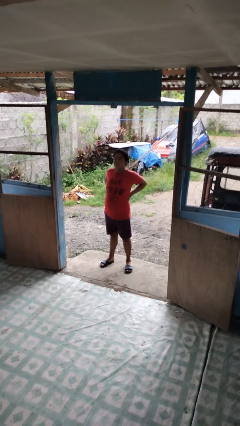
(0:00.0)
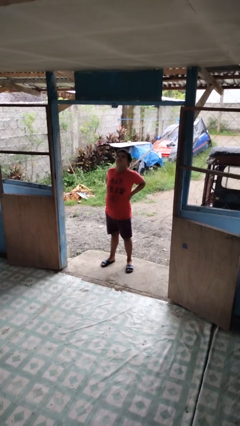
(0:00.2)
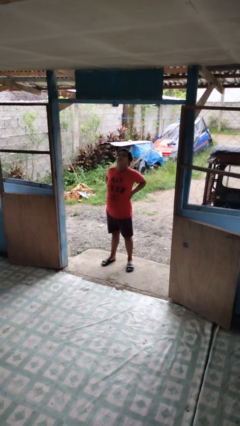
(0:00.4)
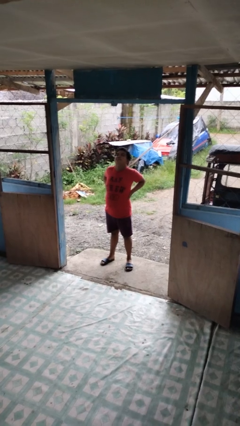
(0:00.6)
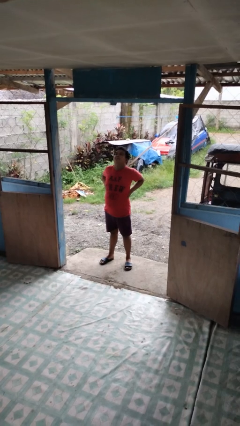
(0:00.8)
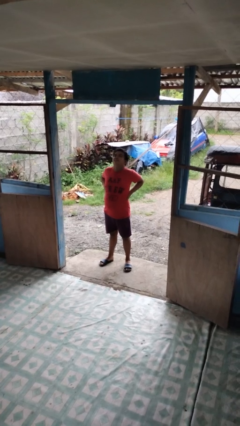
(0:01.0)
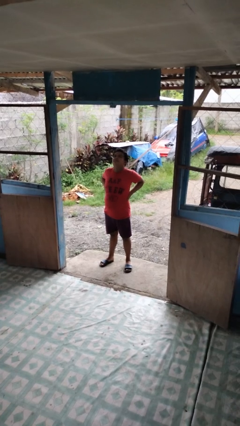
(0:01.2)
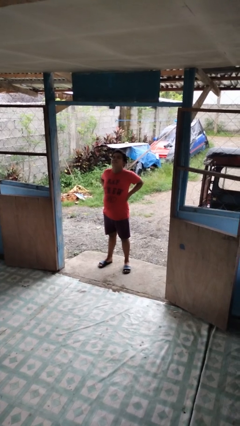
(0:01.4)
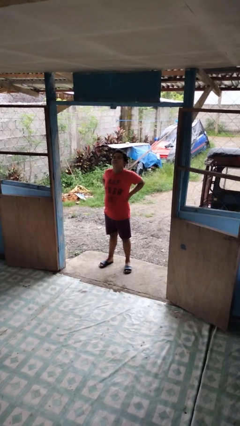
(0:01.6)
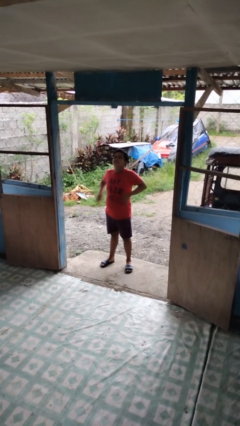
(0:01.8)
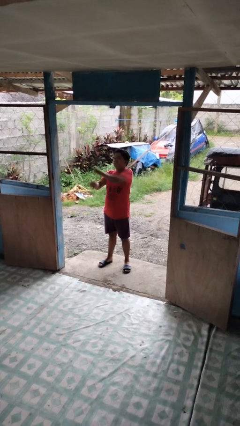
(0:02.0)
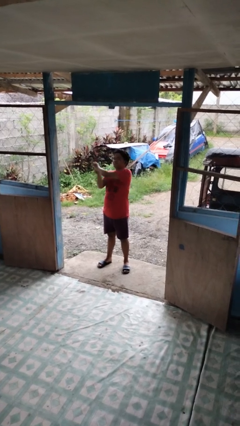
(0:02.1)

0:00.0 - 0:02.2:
person stretches back

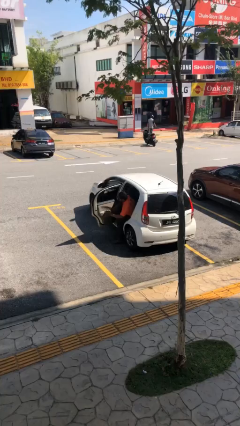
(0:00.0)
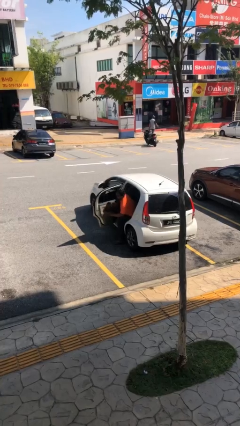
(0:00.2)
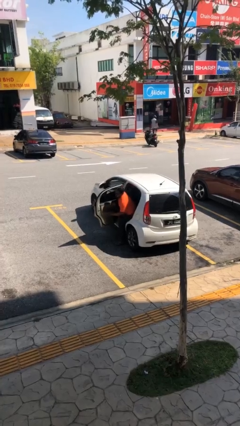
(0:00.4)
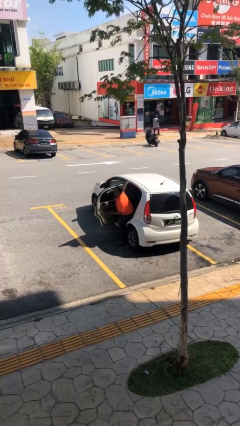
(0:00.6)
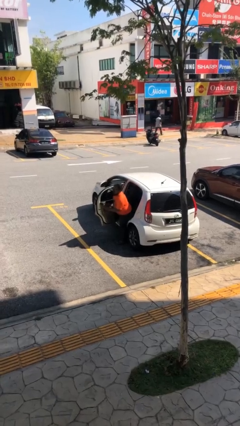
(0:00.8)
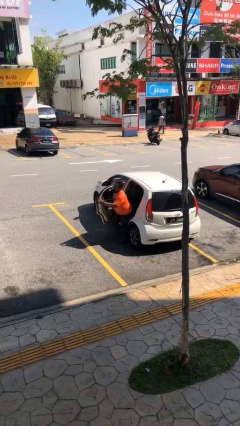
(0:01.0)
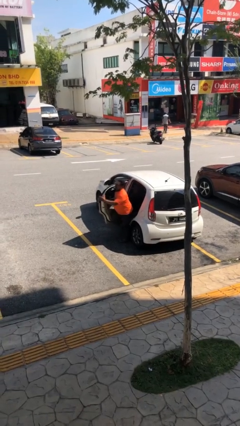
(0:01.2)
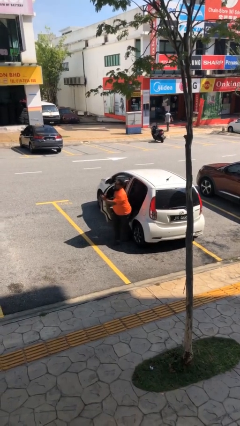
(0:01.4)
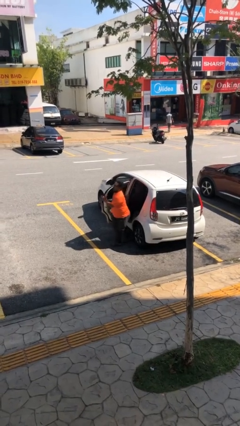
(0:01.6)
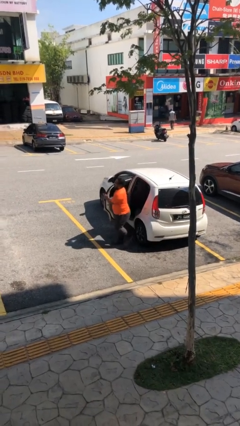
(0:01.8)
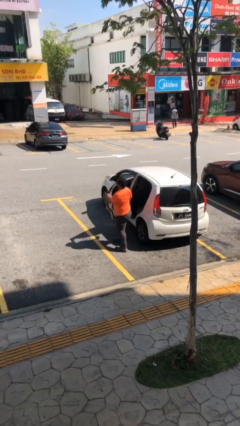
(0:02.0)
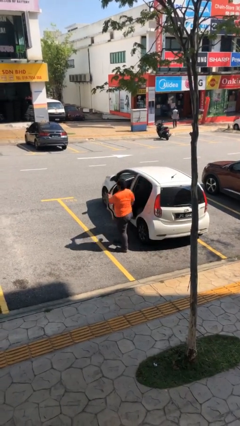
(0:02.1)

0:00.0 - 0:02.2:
person exits car

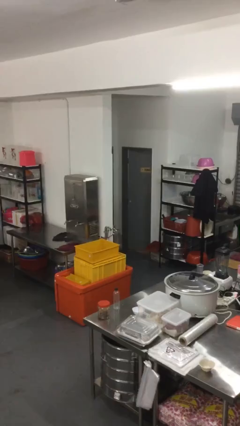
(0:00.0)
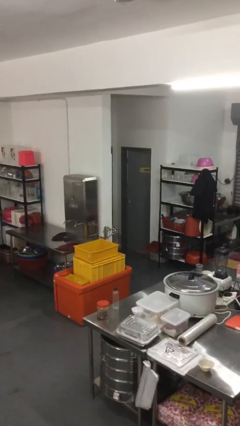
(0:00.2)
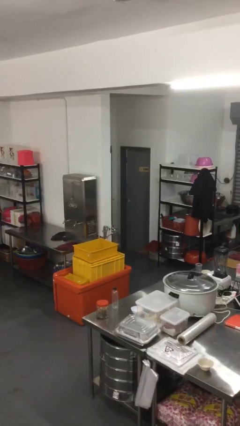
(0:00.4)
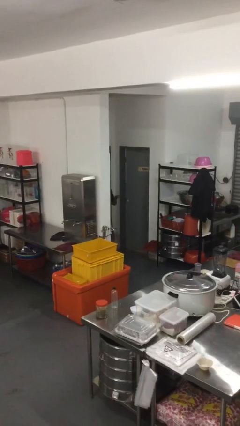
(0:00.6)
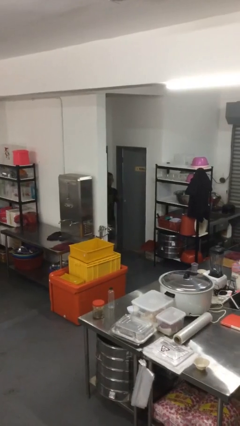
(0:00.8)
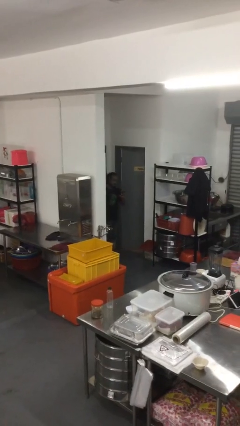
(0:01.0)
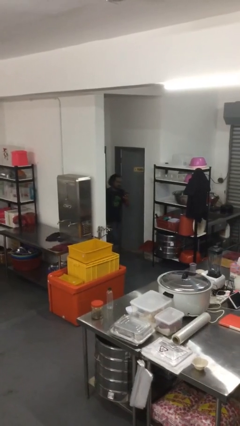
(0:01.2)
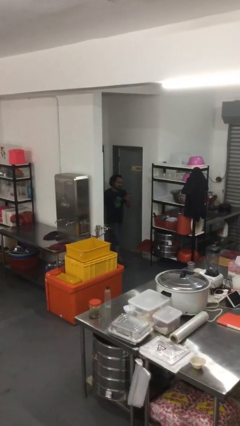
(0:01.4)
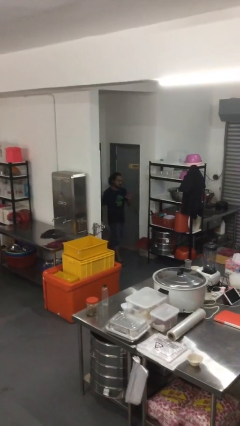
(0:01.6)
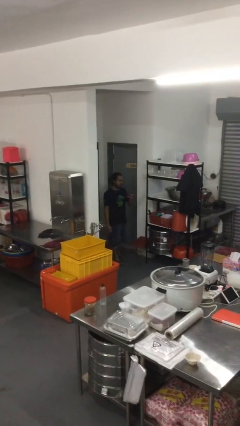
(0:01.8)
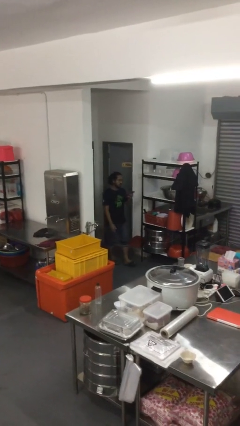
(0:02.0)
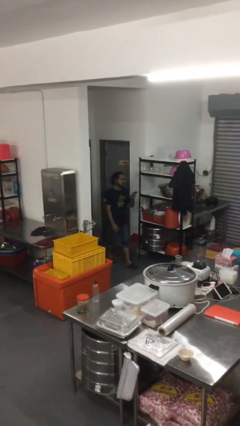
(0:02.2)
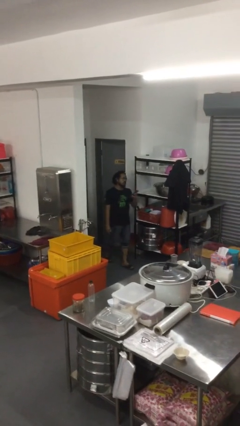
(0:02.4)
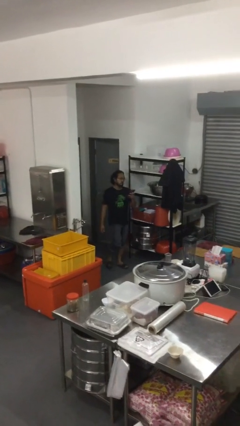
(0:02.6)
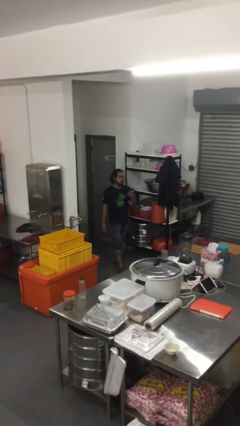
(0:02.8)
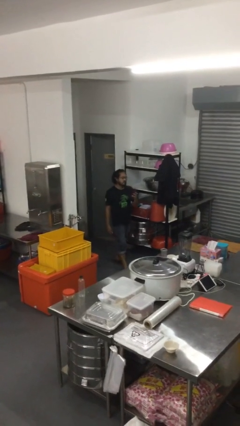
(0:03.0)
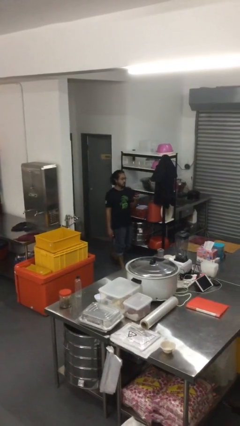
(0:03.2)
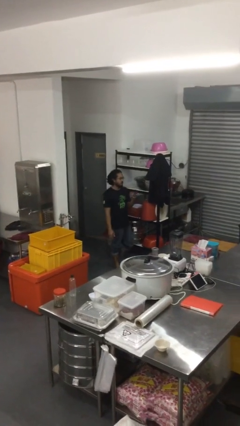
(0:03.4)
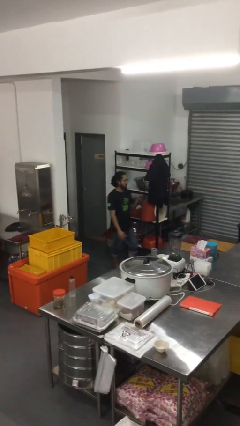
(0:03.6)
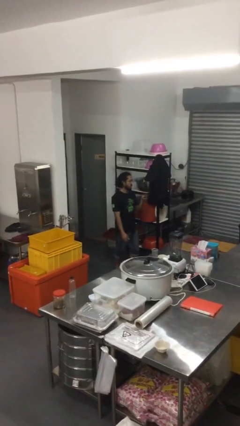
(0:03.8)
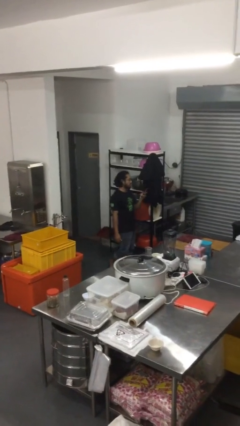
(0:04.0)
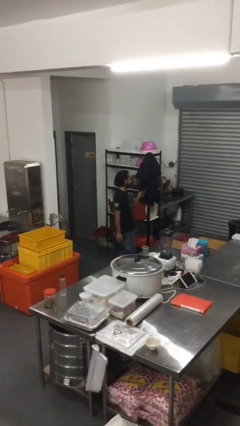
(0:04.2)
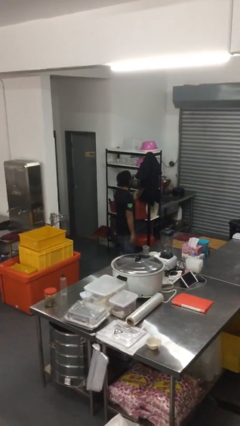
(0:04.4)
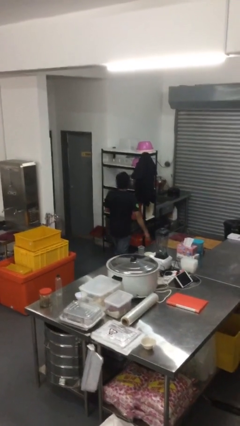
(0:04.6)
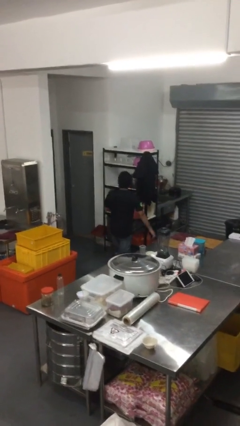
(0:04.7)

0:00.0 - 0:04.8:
person enters scene through structure

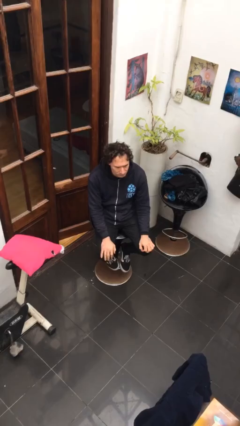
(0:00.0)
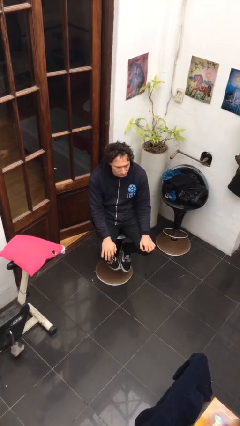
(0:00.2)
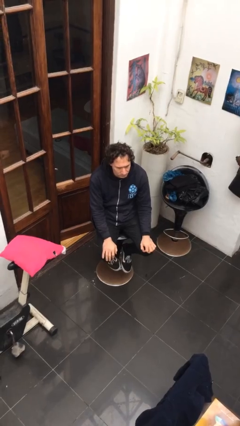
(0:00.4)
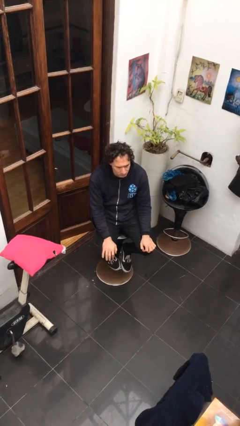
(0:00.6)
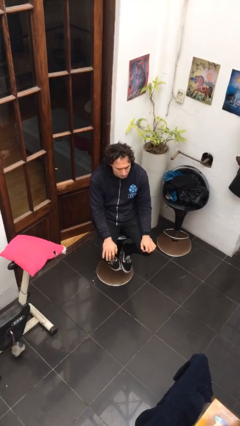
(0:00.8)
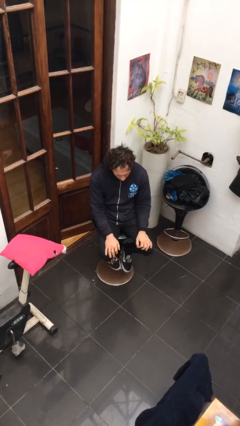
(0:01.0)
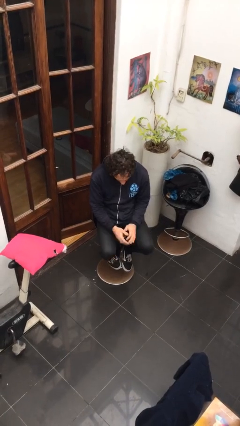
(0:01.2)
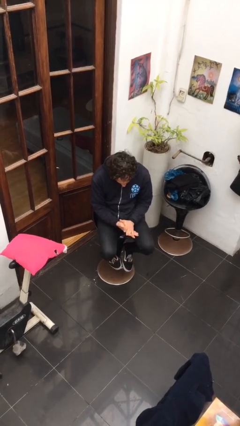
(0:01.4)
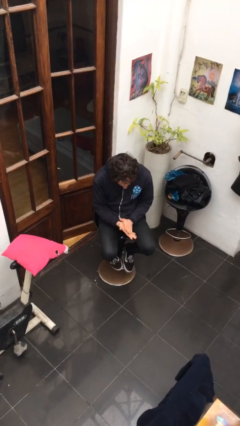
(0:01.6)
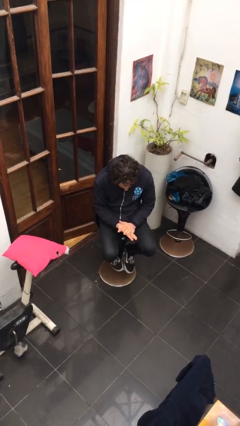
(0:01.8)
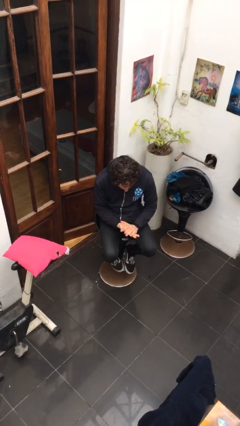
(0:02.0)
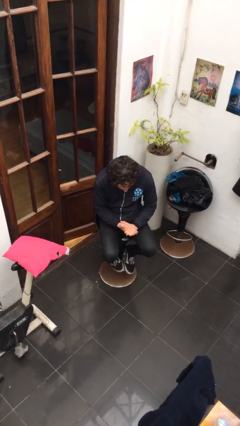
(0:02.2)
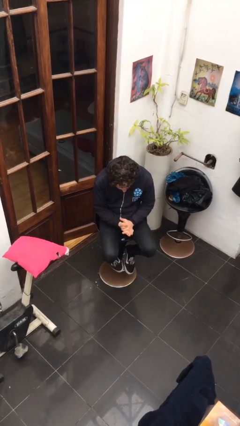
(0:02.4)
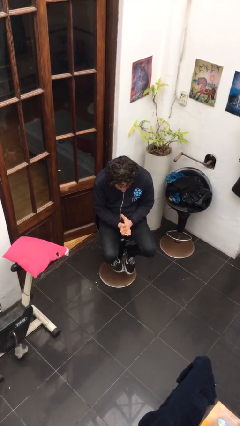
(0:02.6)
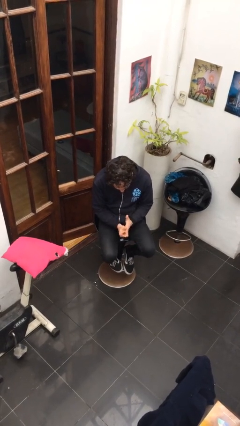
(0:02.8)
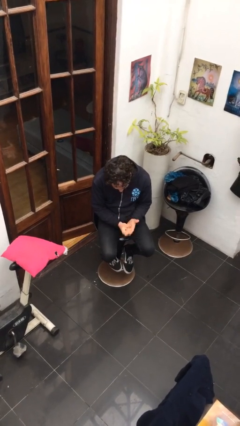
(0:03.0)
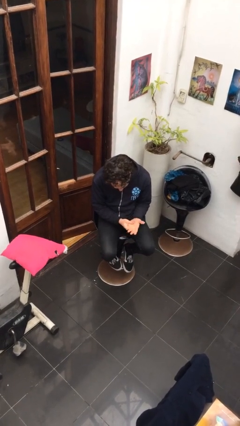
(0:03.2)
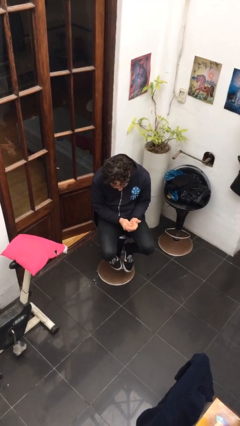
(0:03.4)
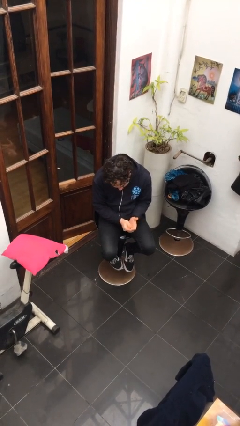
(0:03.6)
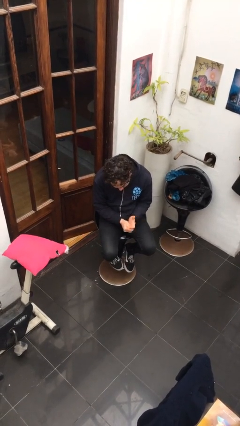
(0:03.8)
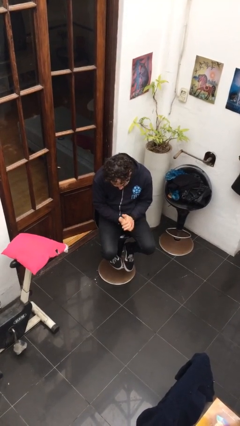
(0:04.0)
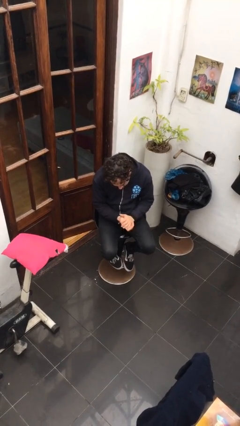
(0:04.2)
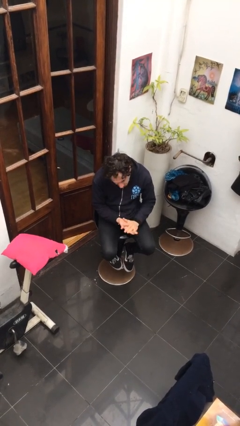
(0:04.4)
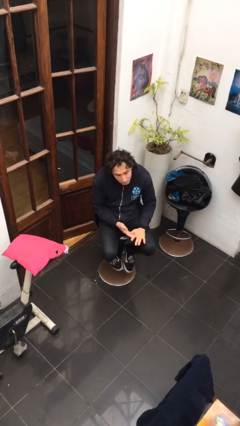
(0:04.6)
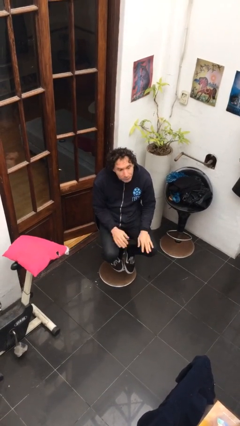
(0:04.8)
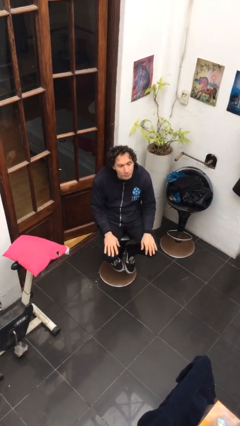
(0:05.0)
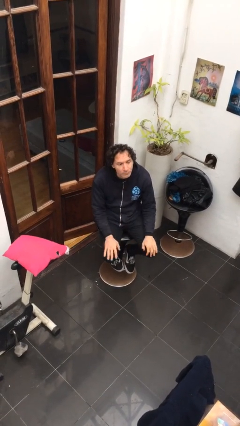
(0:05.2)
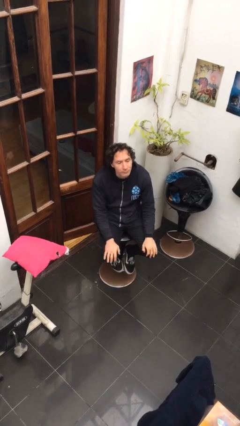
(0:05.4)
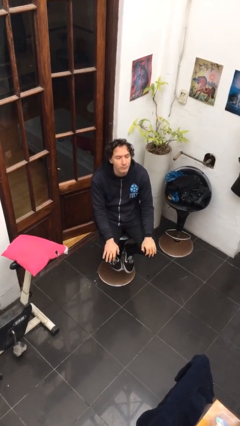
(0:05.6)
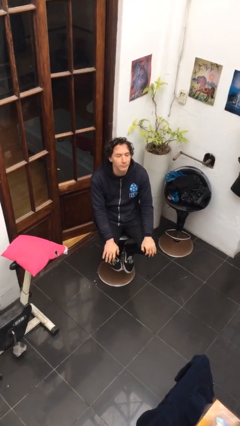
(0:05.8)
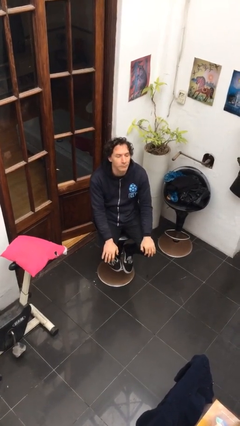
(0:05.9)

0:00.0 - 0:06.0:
person looks at hands in lap

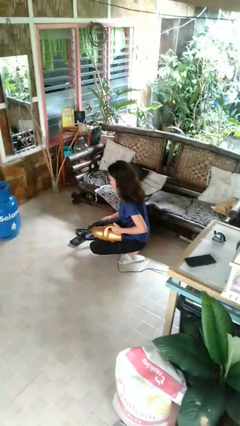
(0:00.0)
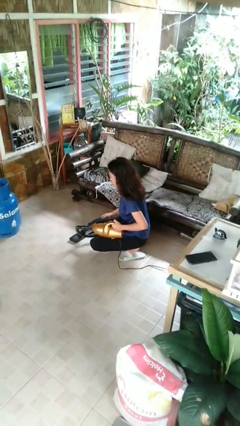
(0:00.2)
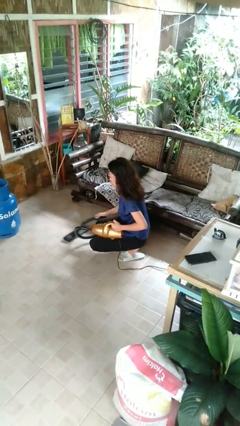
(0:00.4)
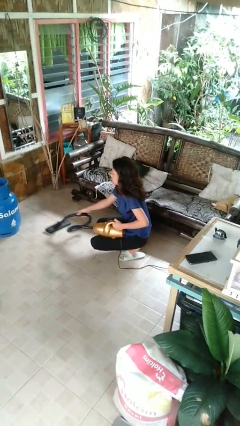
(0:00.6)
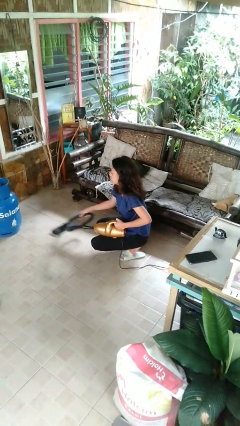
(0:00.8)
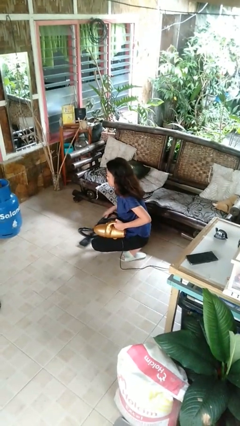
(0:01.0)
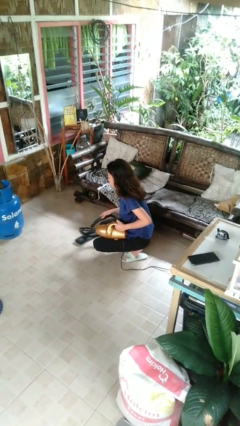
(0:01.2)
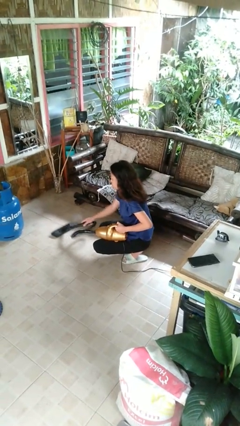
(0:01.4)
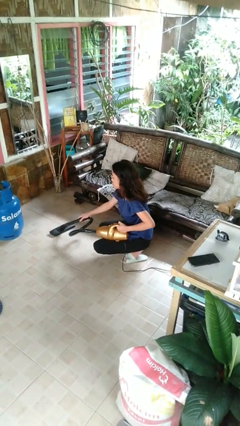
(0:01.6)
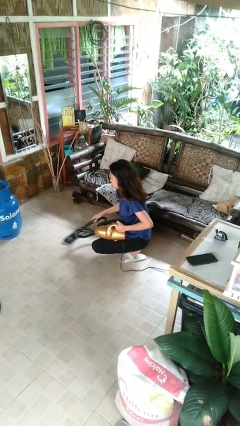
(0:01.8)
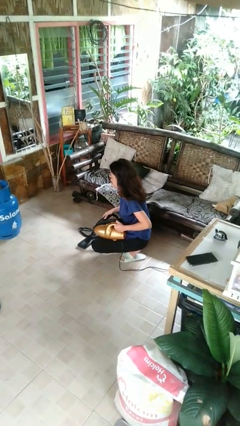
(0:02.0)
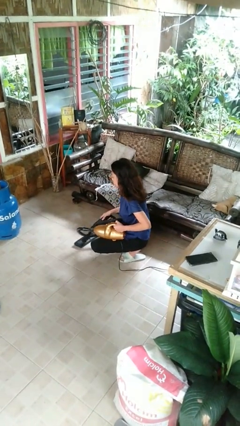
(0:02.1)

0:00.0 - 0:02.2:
person vacuums carpet
